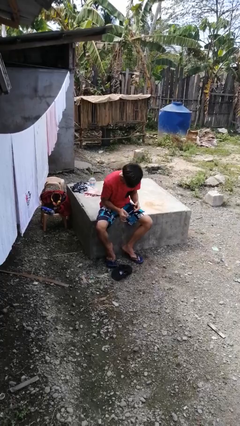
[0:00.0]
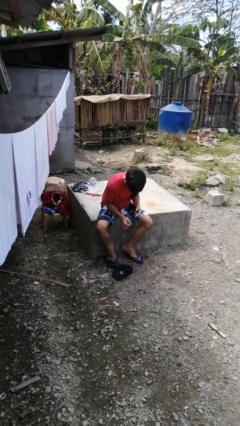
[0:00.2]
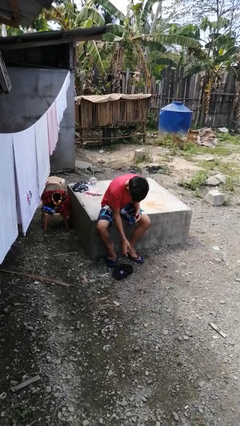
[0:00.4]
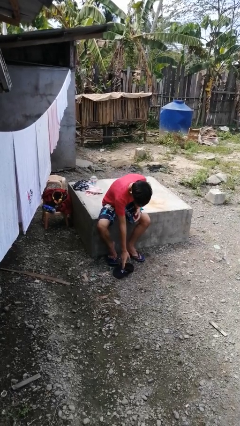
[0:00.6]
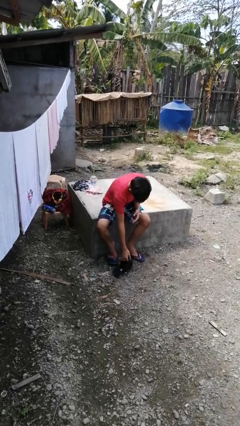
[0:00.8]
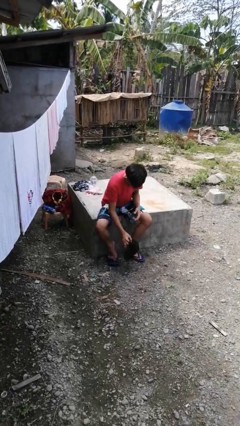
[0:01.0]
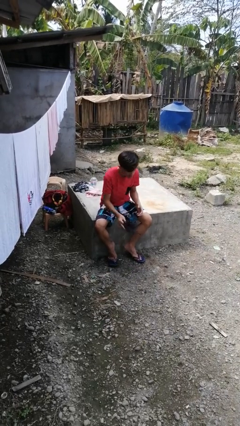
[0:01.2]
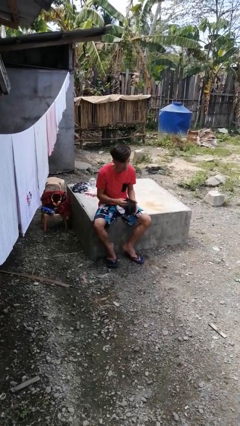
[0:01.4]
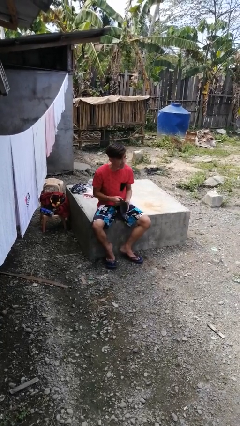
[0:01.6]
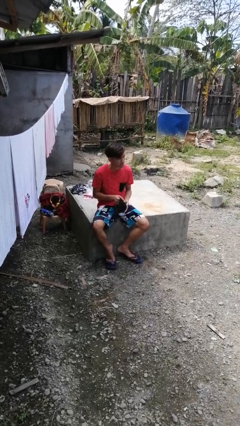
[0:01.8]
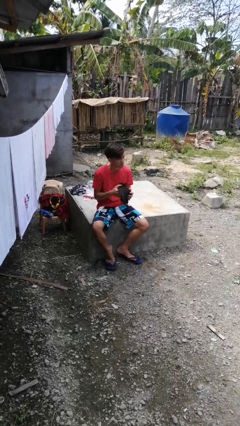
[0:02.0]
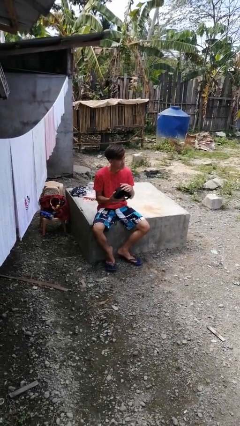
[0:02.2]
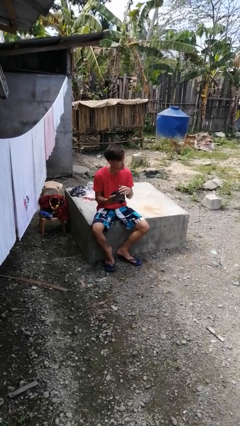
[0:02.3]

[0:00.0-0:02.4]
person picks up object from floor

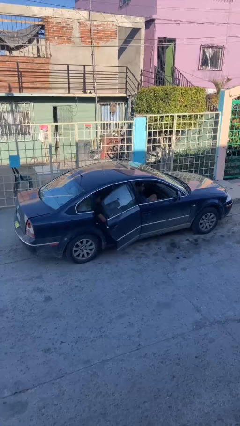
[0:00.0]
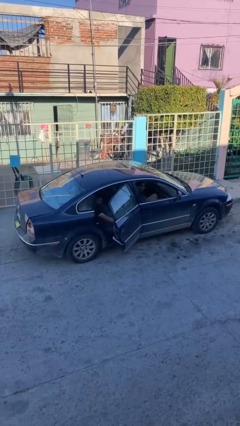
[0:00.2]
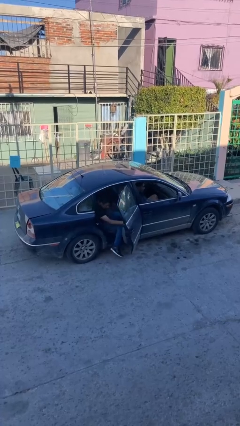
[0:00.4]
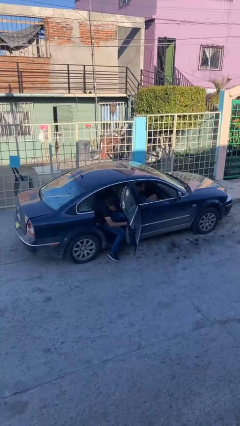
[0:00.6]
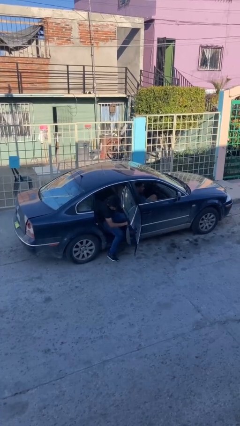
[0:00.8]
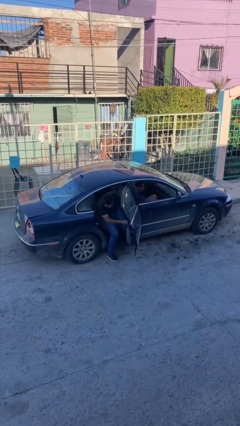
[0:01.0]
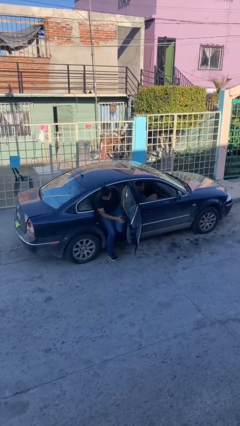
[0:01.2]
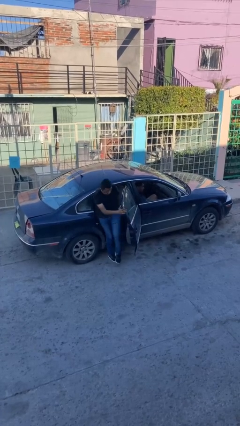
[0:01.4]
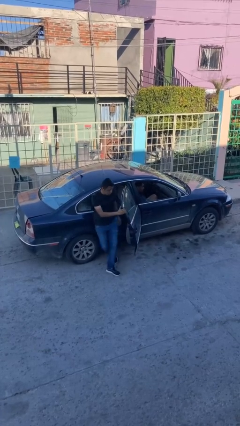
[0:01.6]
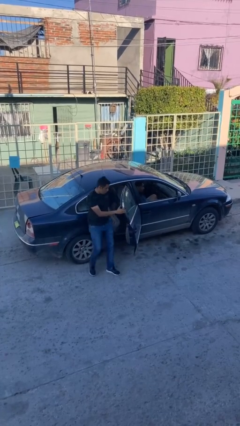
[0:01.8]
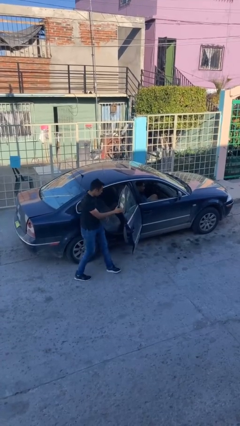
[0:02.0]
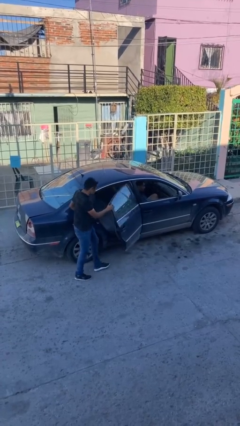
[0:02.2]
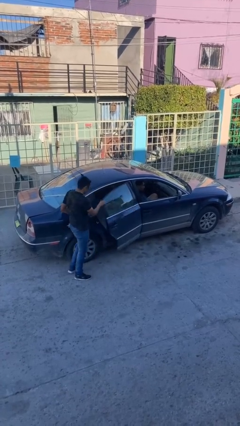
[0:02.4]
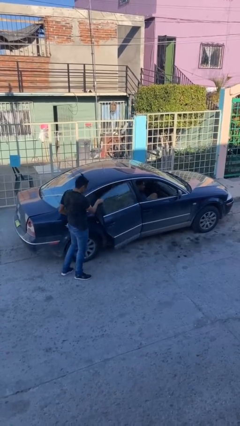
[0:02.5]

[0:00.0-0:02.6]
car drops off person

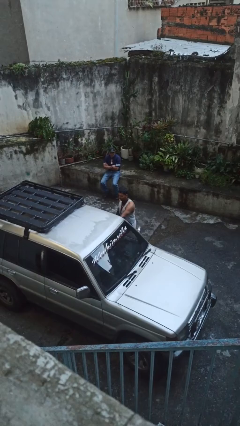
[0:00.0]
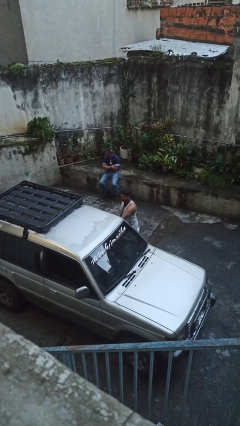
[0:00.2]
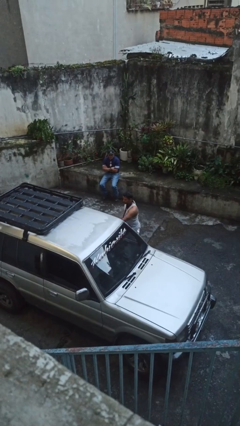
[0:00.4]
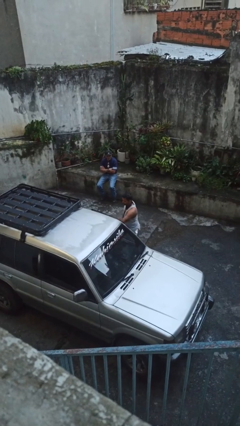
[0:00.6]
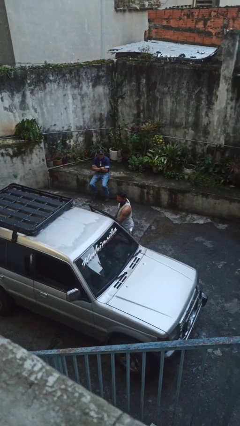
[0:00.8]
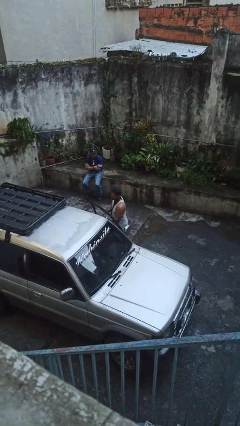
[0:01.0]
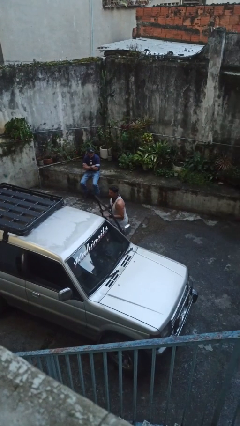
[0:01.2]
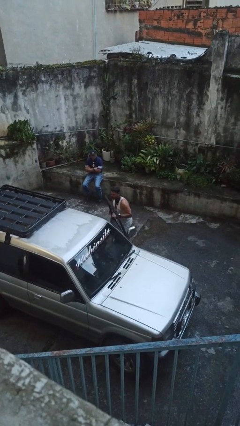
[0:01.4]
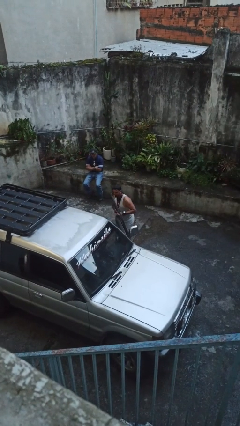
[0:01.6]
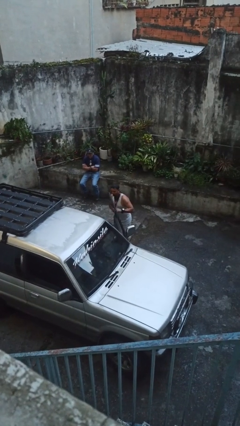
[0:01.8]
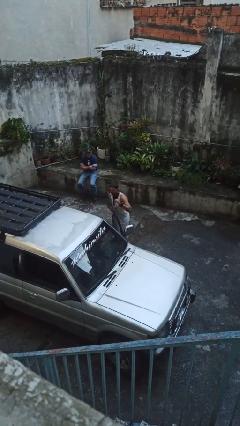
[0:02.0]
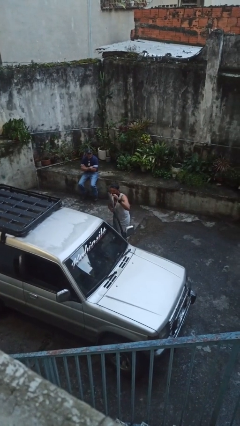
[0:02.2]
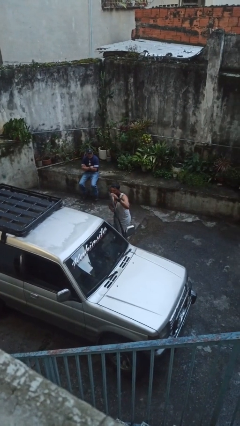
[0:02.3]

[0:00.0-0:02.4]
person opens car door

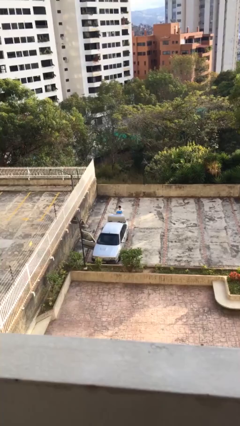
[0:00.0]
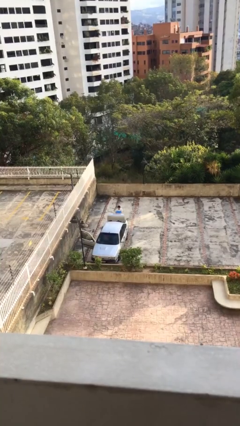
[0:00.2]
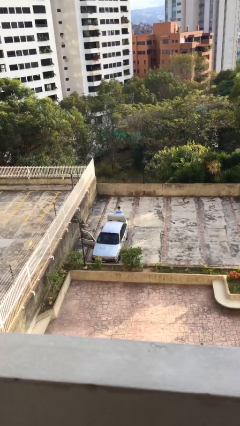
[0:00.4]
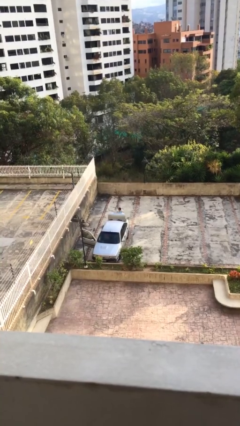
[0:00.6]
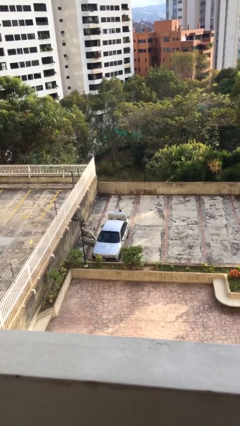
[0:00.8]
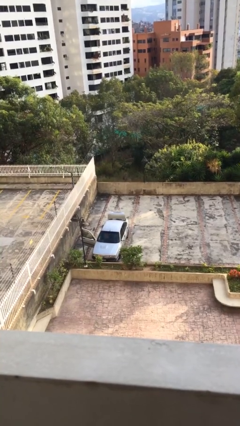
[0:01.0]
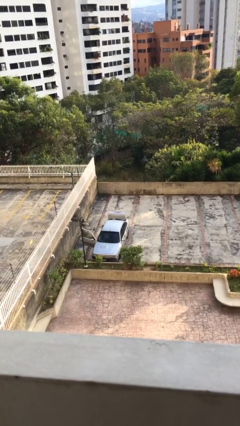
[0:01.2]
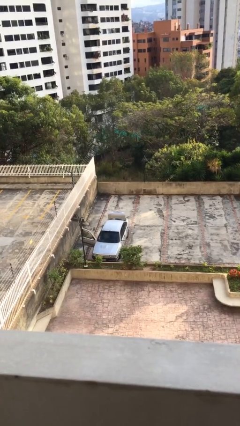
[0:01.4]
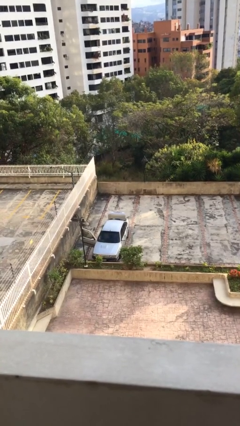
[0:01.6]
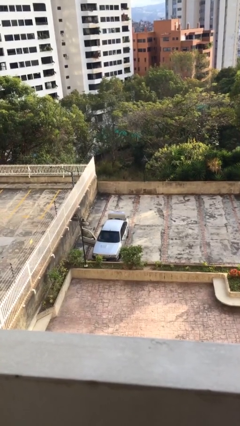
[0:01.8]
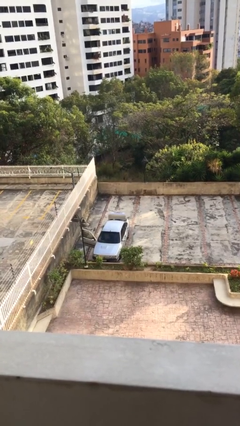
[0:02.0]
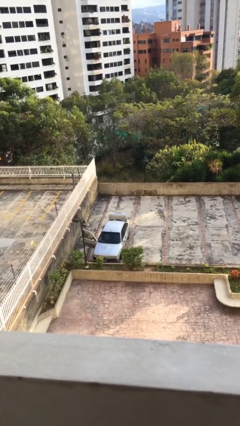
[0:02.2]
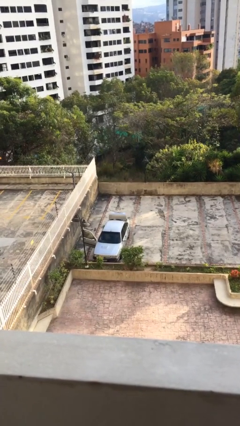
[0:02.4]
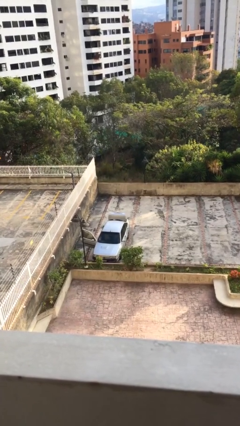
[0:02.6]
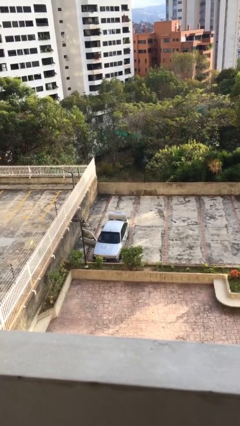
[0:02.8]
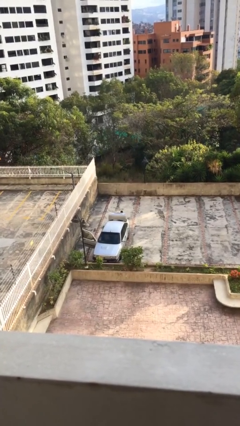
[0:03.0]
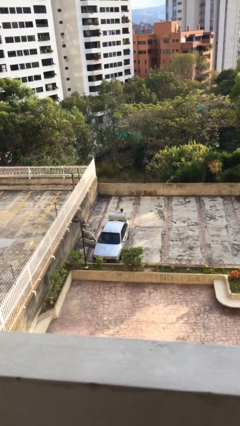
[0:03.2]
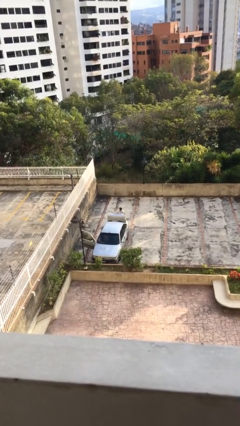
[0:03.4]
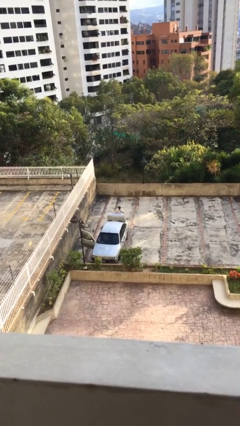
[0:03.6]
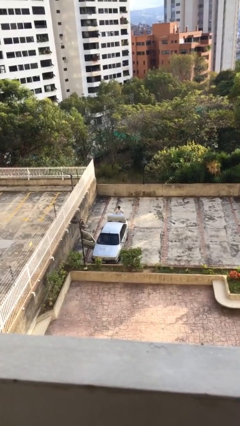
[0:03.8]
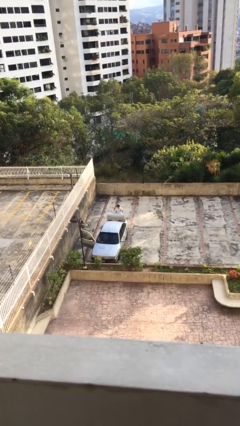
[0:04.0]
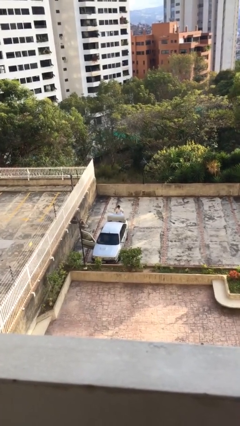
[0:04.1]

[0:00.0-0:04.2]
person loads car

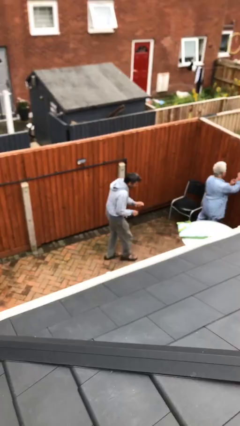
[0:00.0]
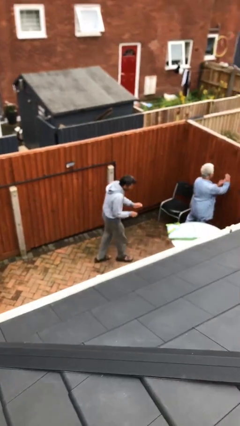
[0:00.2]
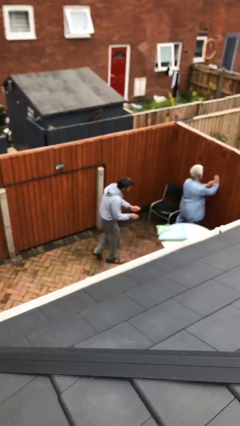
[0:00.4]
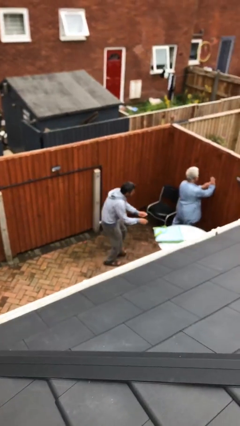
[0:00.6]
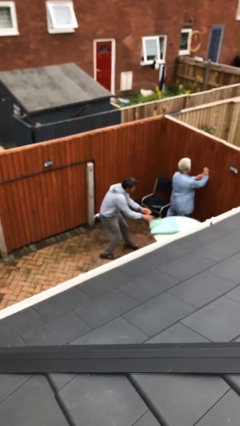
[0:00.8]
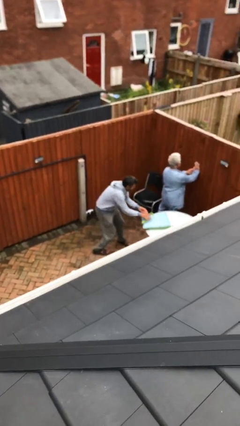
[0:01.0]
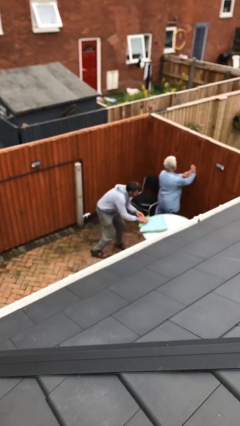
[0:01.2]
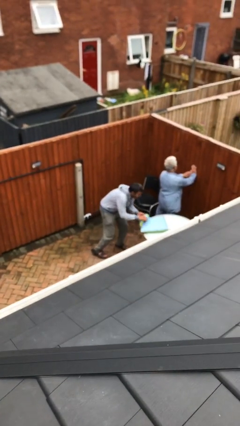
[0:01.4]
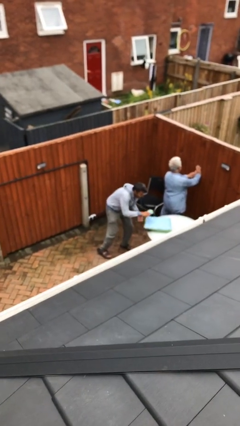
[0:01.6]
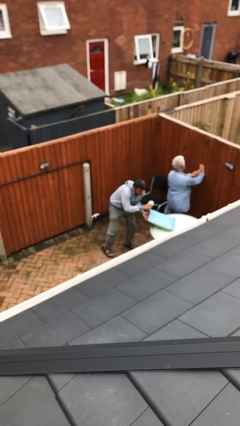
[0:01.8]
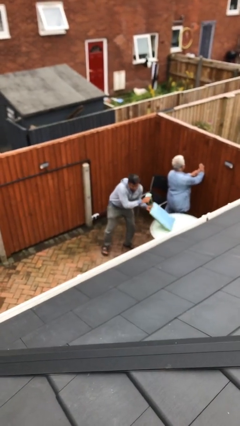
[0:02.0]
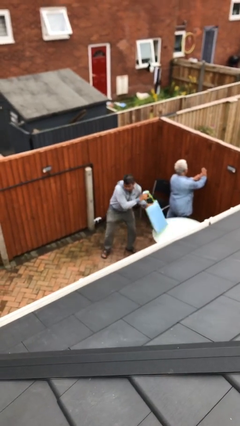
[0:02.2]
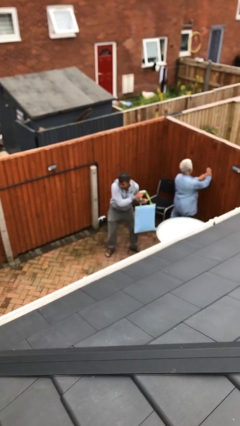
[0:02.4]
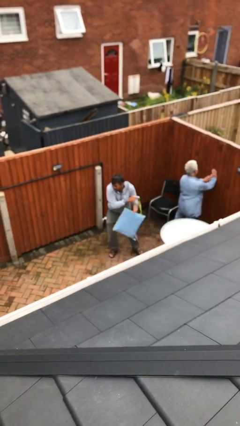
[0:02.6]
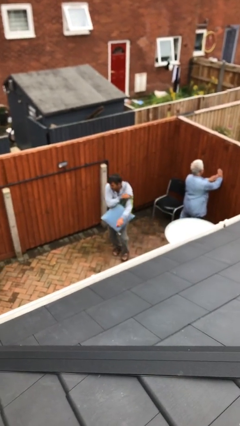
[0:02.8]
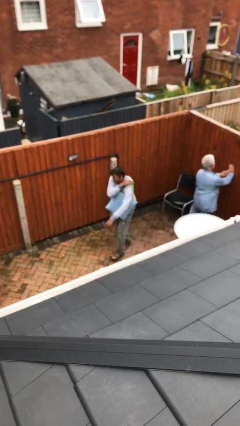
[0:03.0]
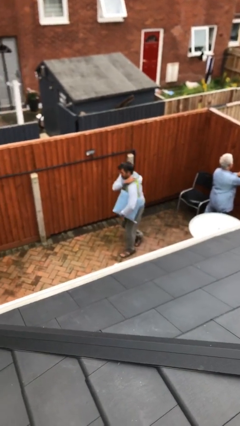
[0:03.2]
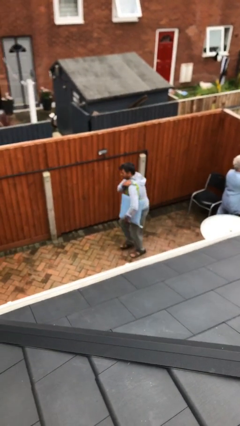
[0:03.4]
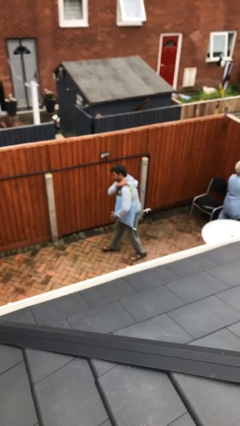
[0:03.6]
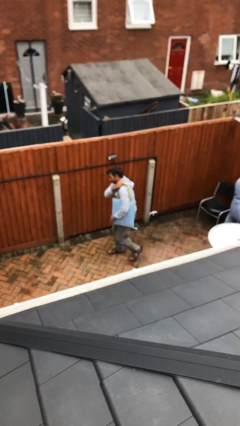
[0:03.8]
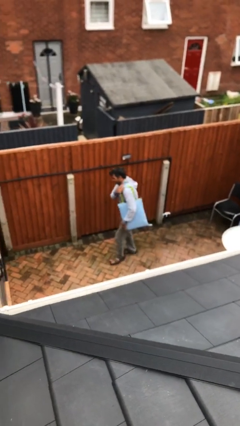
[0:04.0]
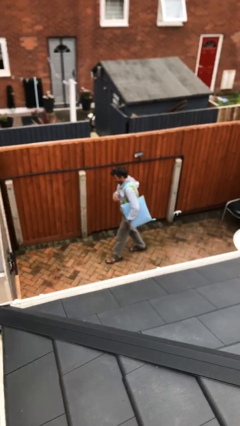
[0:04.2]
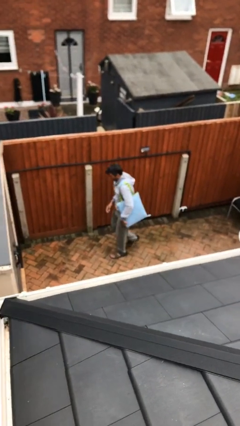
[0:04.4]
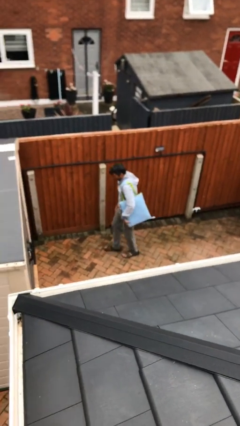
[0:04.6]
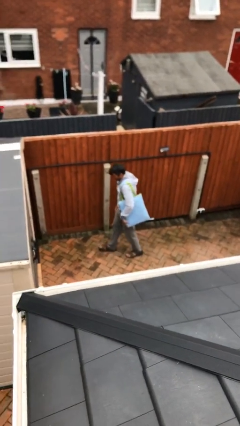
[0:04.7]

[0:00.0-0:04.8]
person steals object from person

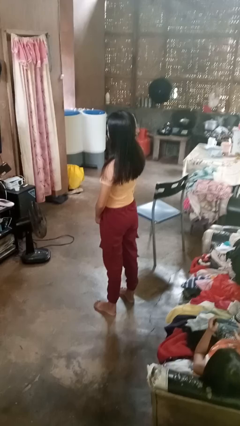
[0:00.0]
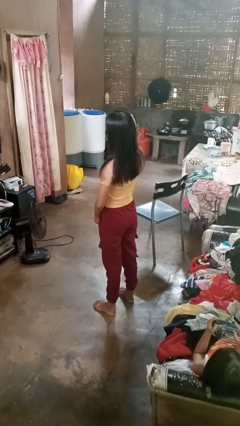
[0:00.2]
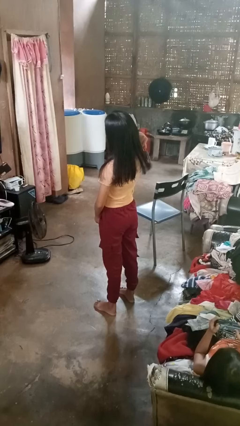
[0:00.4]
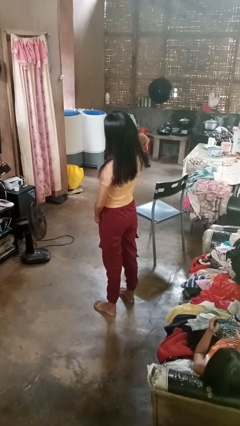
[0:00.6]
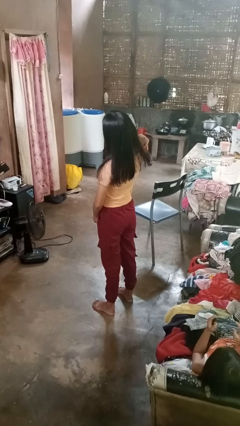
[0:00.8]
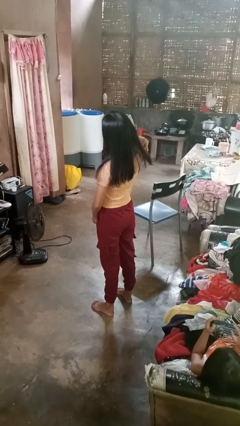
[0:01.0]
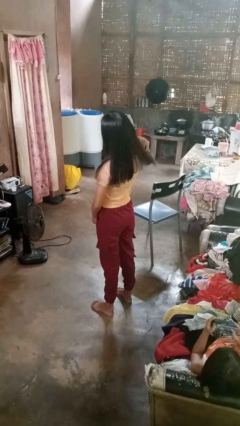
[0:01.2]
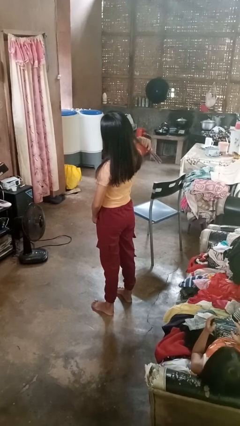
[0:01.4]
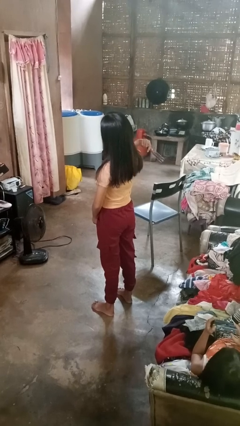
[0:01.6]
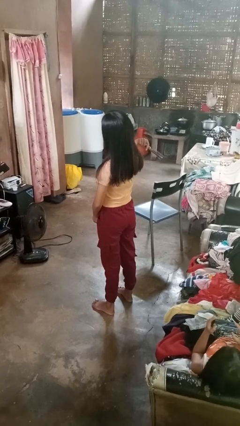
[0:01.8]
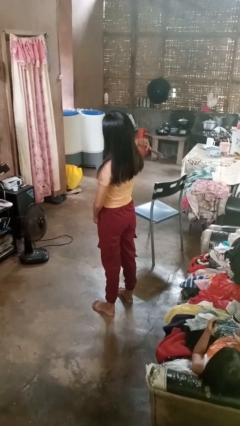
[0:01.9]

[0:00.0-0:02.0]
person brushes hair
